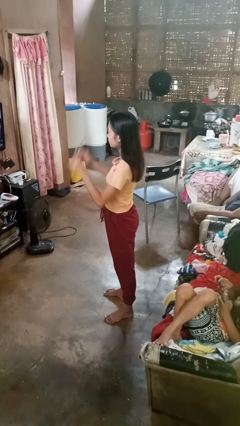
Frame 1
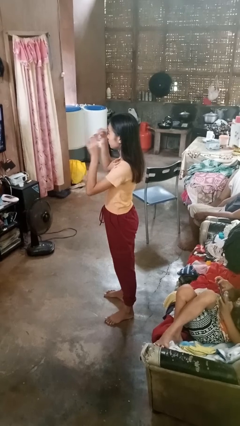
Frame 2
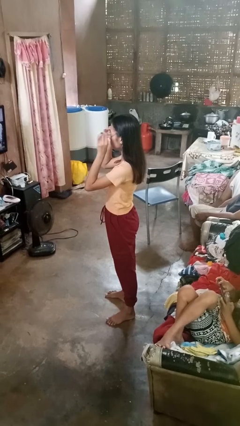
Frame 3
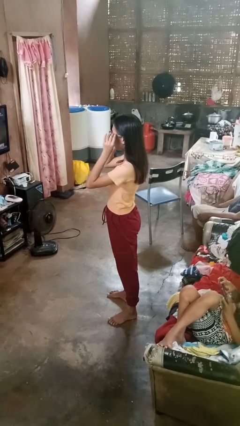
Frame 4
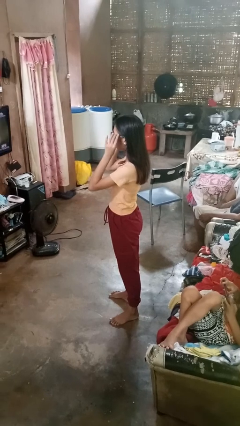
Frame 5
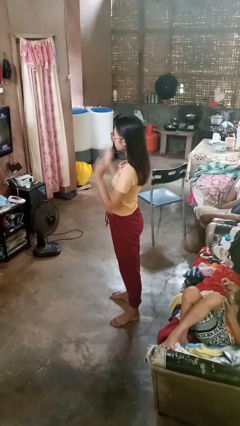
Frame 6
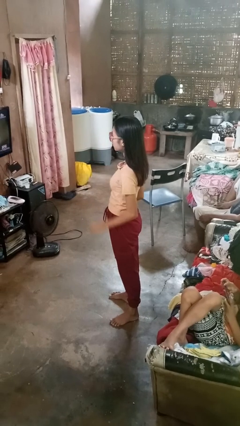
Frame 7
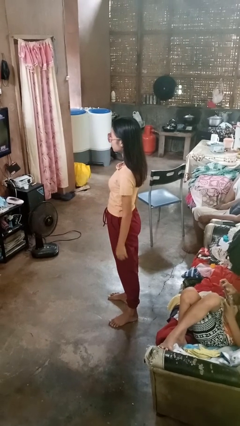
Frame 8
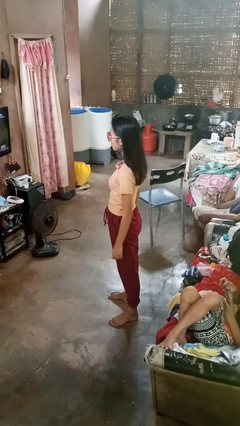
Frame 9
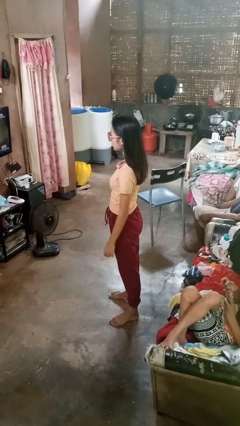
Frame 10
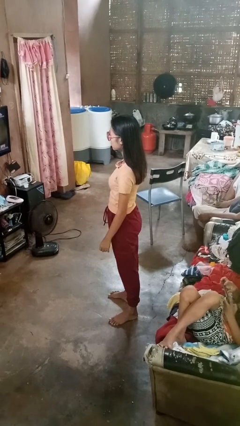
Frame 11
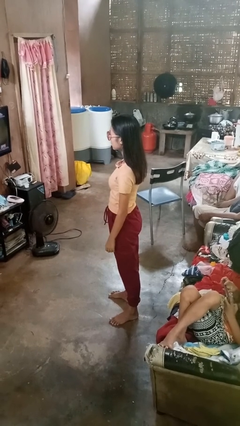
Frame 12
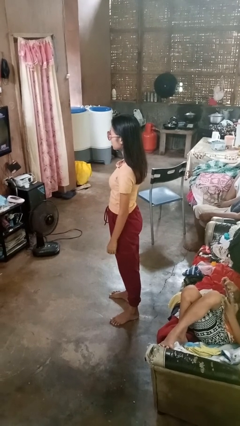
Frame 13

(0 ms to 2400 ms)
person puts on sunglasses

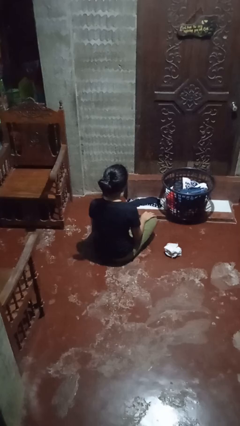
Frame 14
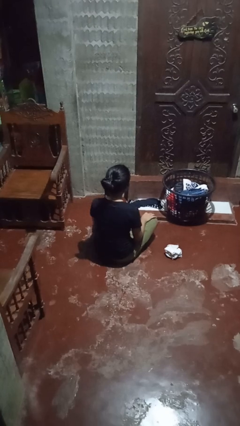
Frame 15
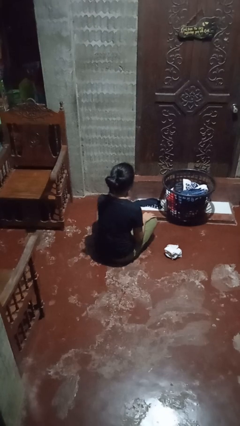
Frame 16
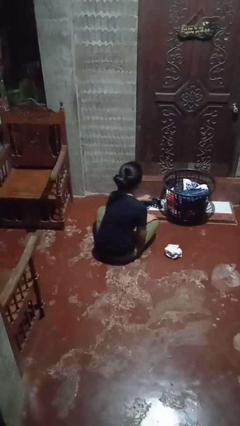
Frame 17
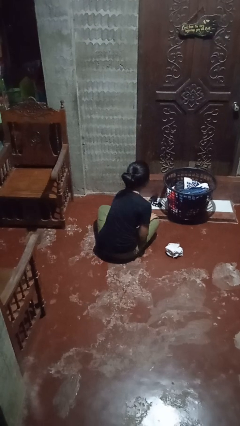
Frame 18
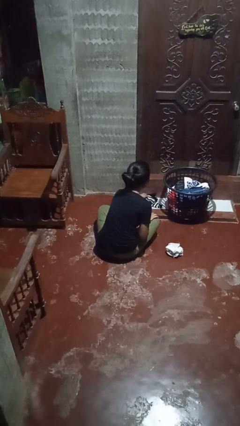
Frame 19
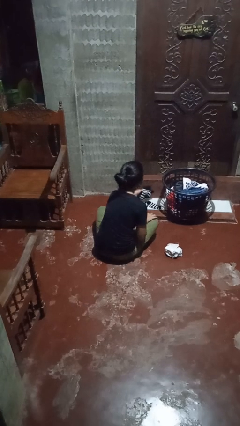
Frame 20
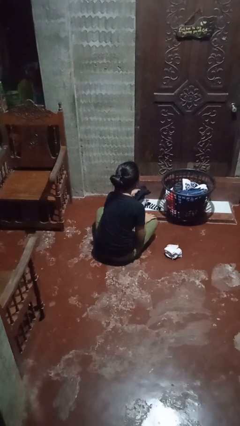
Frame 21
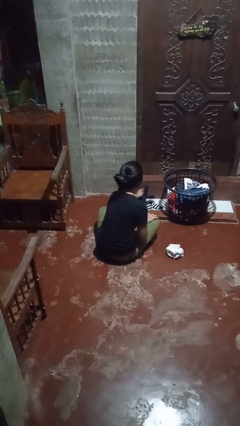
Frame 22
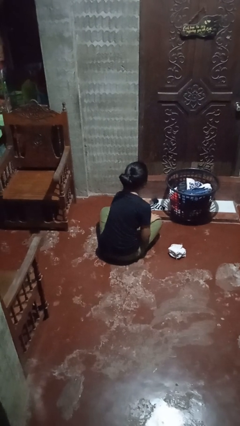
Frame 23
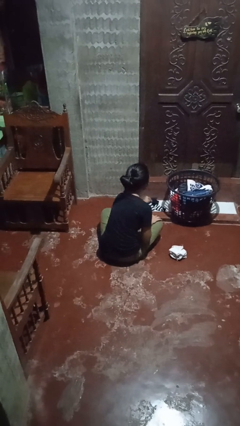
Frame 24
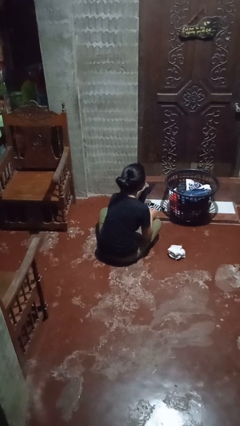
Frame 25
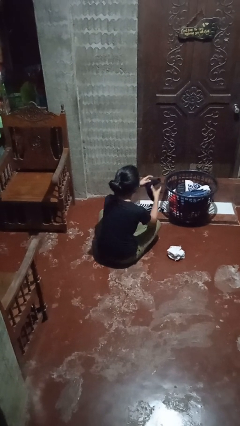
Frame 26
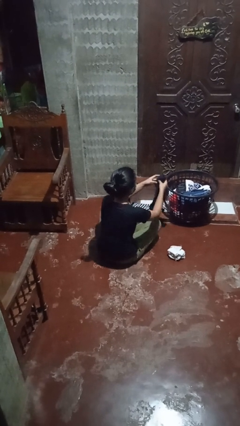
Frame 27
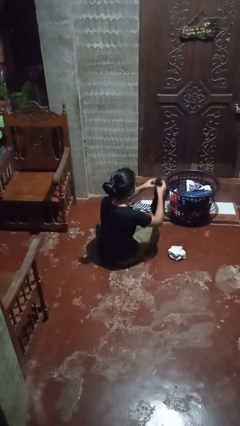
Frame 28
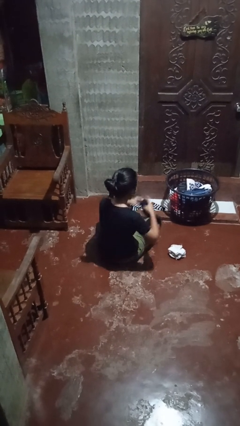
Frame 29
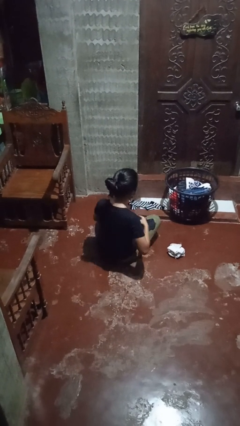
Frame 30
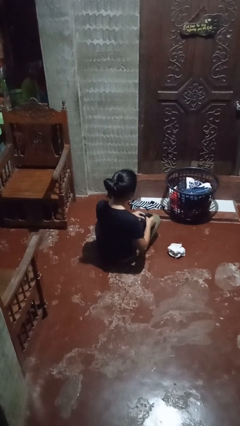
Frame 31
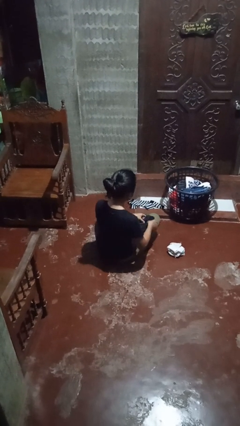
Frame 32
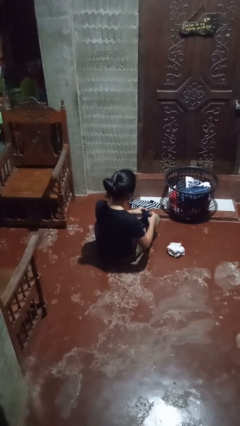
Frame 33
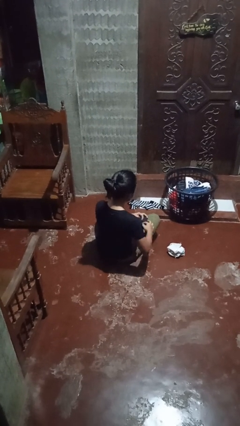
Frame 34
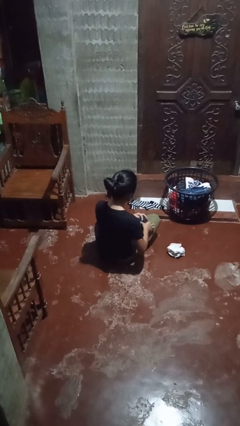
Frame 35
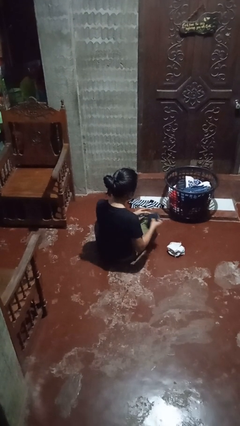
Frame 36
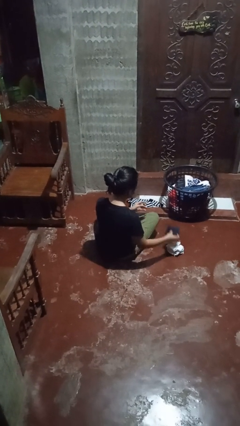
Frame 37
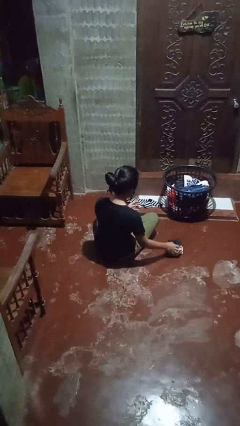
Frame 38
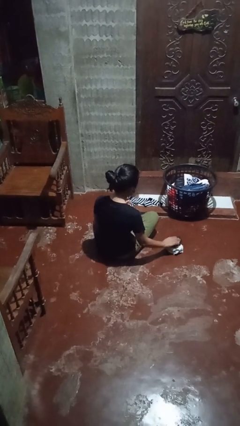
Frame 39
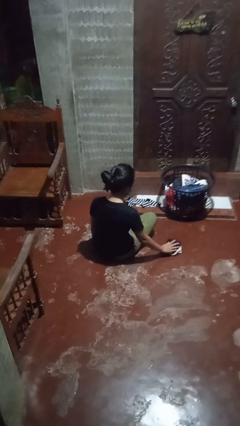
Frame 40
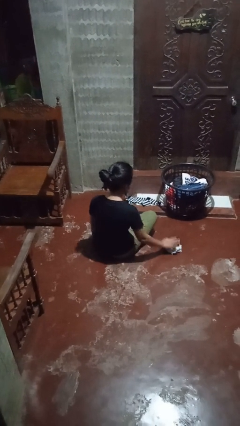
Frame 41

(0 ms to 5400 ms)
person folds socks

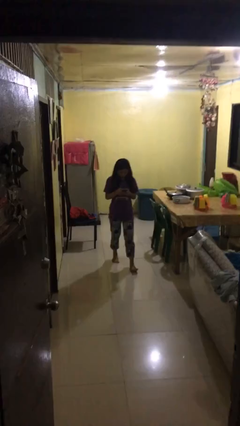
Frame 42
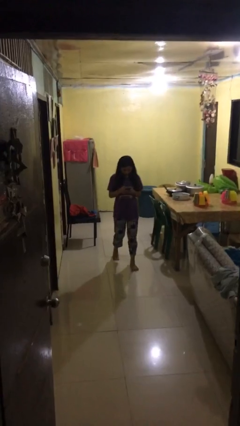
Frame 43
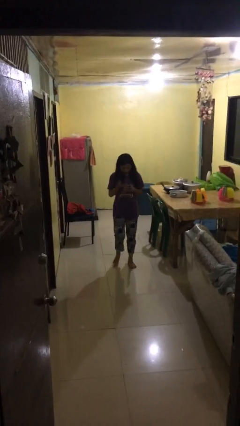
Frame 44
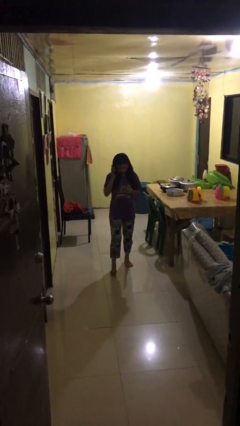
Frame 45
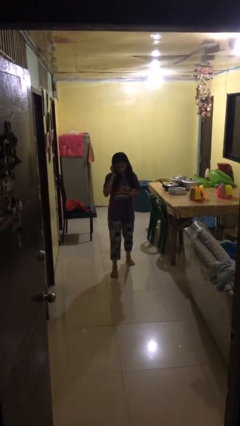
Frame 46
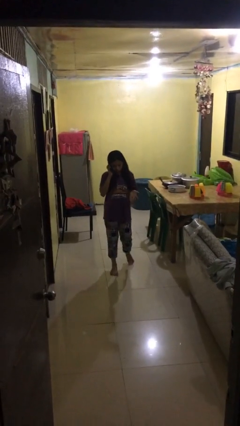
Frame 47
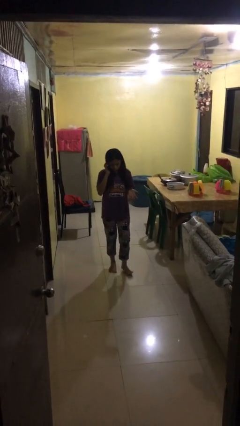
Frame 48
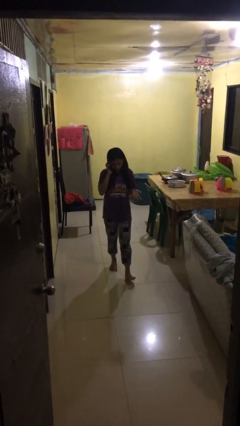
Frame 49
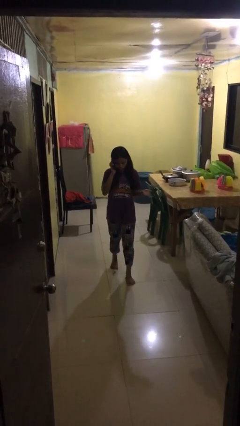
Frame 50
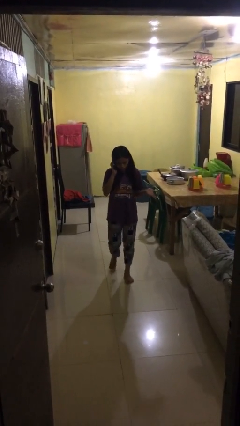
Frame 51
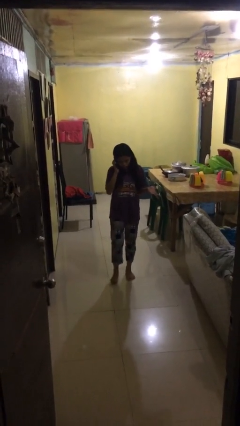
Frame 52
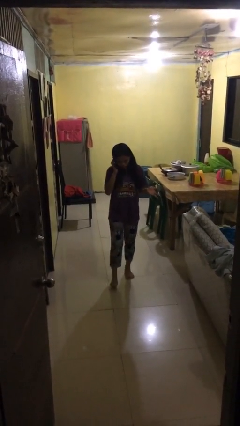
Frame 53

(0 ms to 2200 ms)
person talks on phone

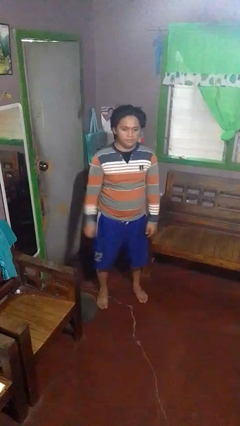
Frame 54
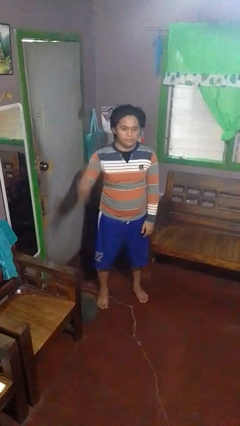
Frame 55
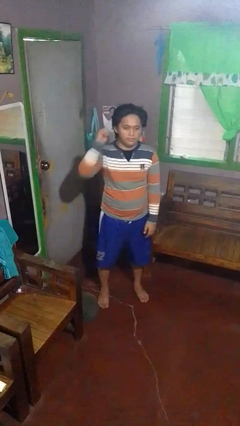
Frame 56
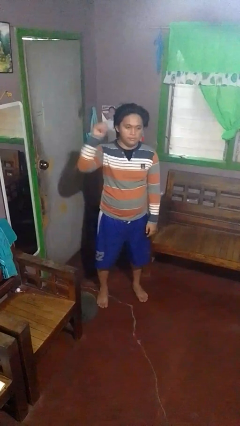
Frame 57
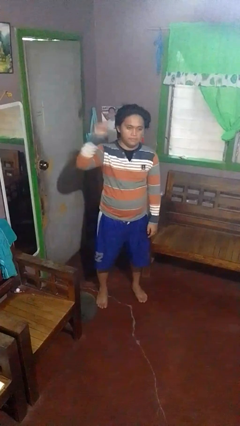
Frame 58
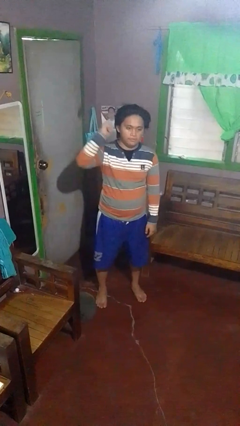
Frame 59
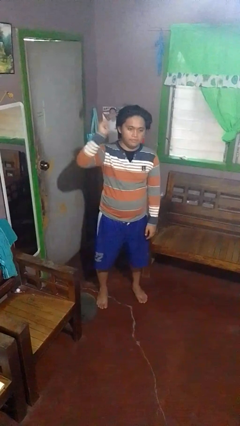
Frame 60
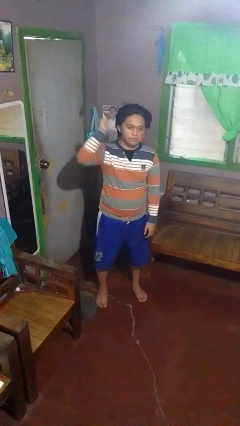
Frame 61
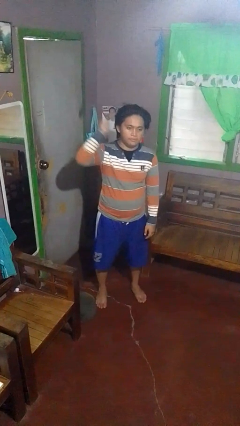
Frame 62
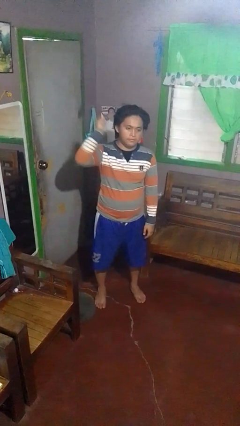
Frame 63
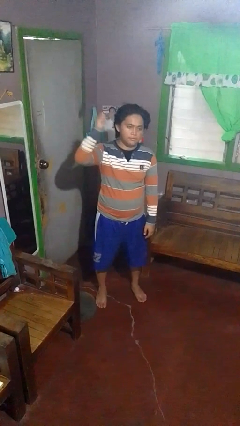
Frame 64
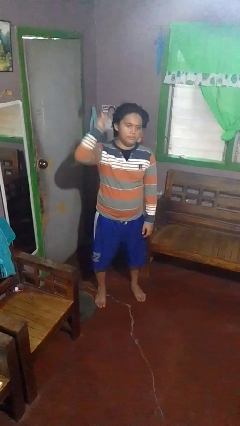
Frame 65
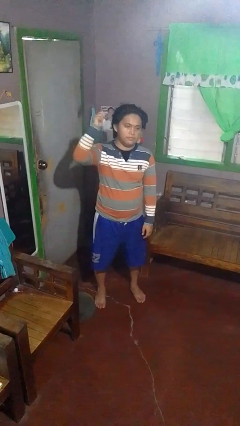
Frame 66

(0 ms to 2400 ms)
person gestures behind me

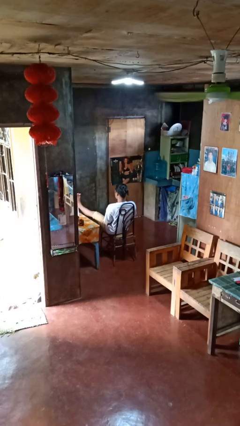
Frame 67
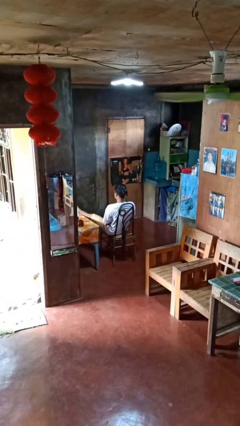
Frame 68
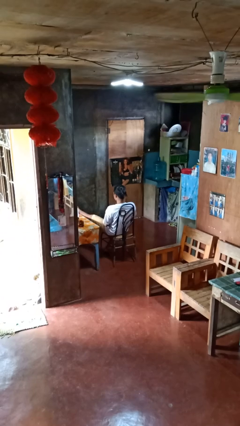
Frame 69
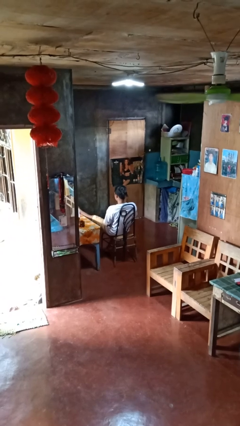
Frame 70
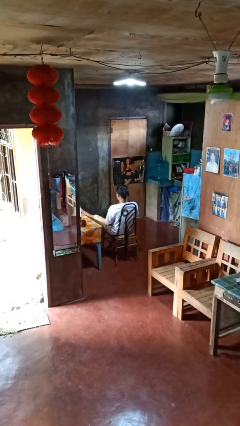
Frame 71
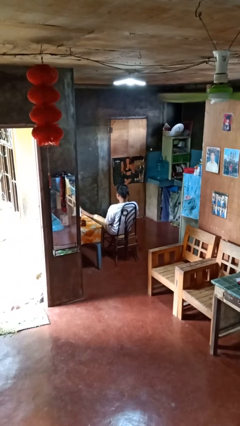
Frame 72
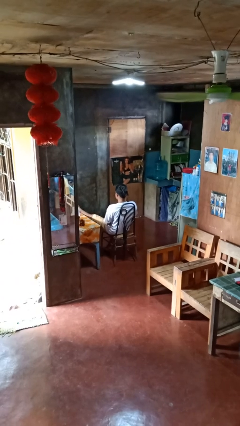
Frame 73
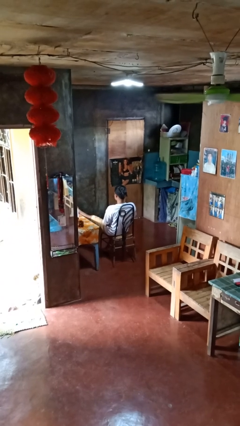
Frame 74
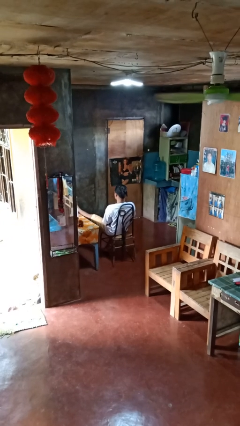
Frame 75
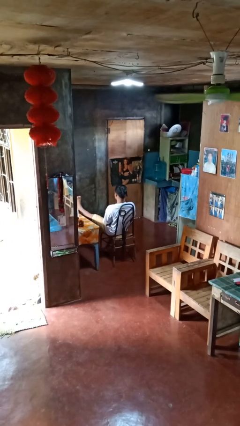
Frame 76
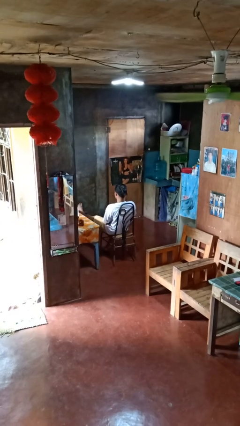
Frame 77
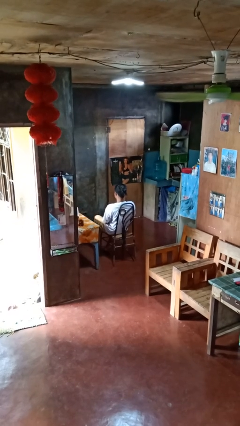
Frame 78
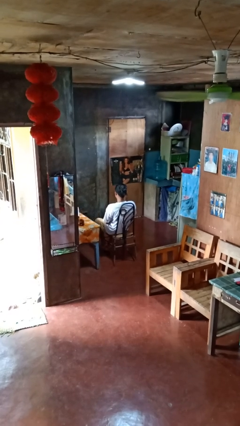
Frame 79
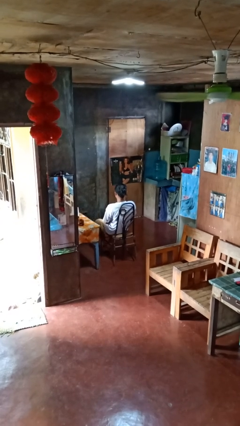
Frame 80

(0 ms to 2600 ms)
person puts feet up

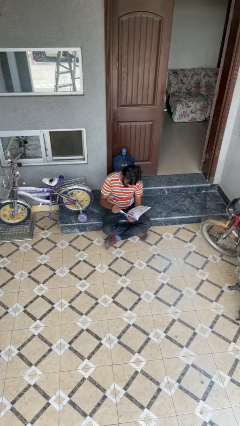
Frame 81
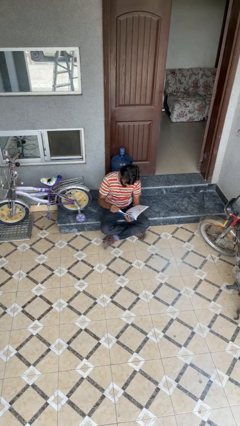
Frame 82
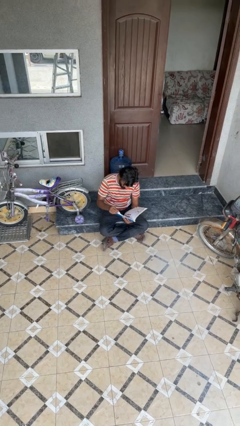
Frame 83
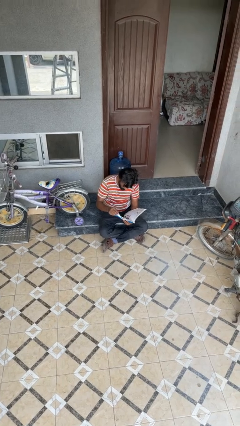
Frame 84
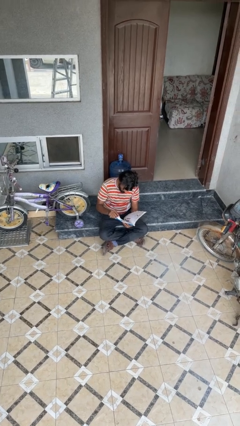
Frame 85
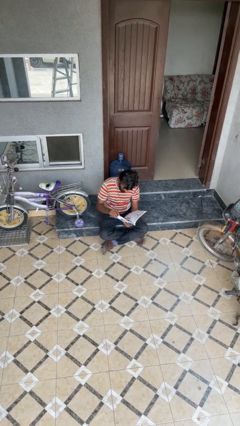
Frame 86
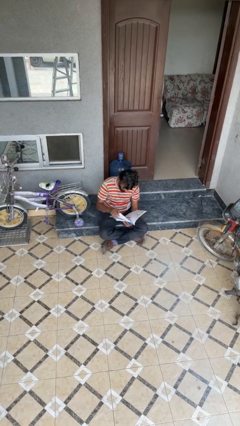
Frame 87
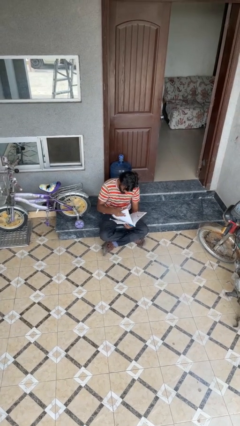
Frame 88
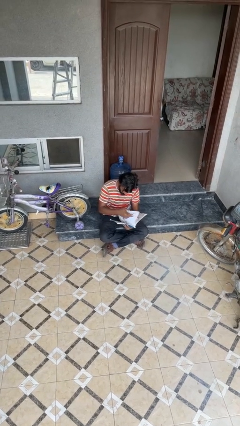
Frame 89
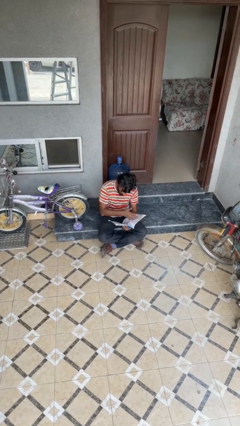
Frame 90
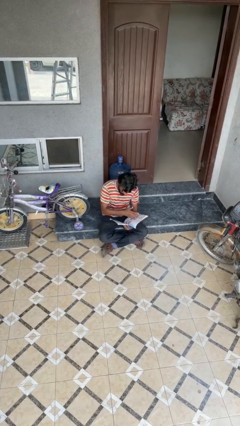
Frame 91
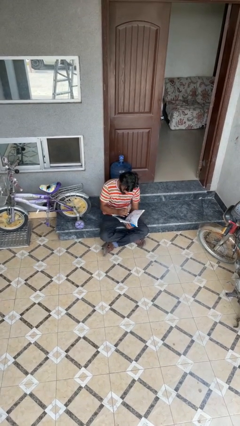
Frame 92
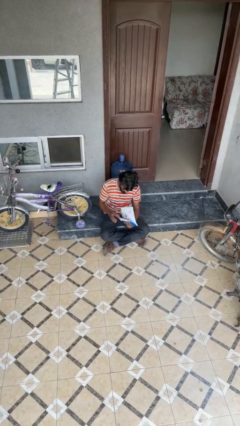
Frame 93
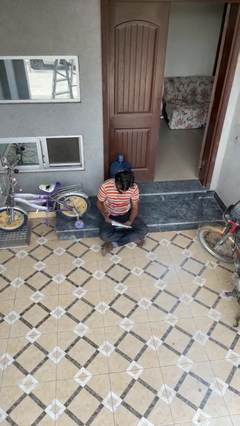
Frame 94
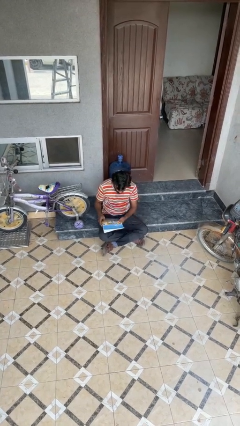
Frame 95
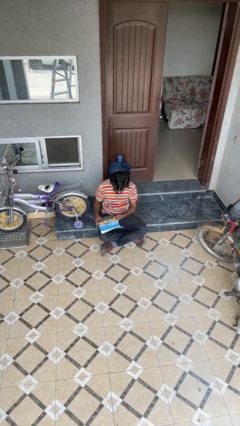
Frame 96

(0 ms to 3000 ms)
person reads book
